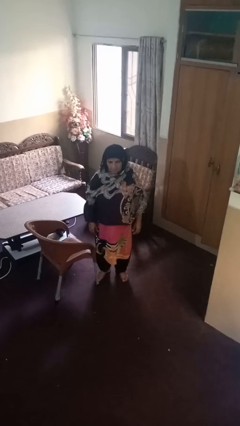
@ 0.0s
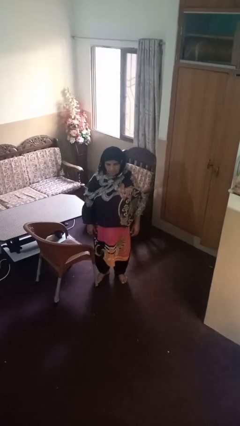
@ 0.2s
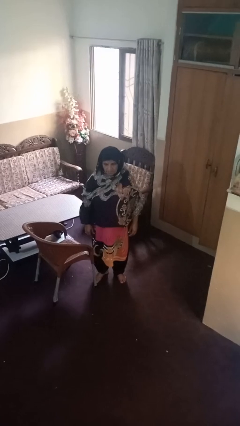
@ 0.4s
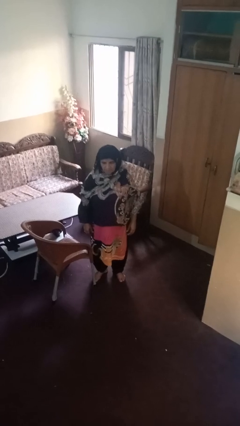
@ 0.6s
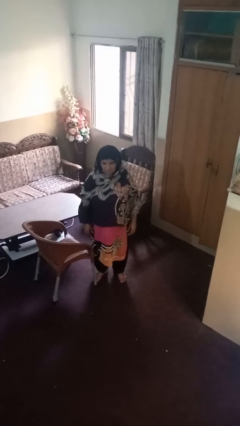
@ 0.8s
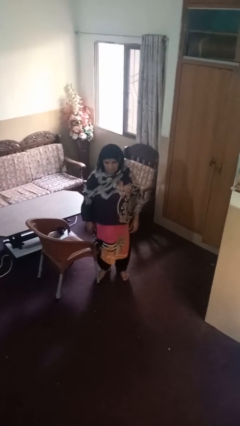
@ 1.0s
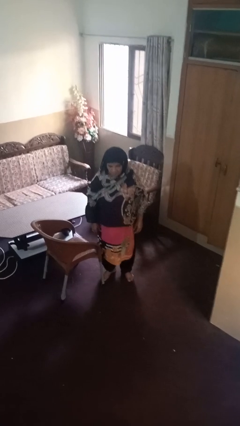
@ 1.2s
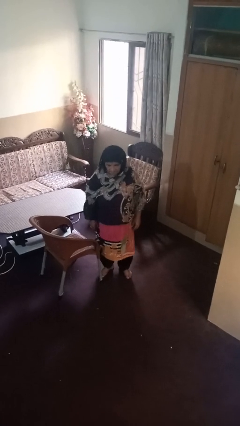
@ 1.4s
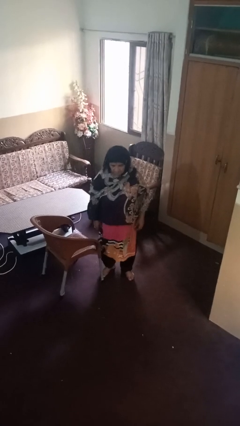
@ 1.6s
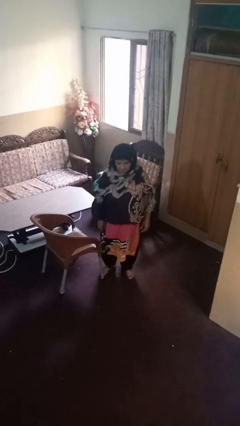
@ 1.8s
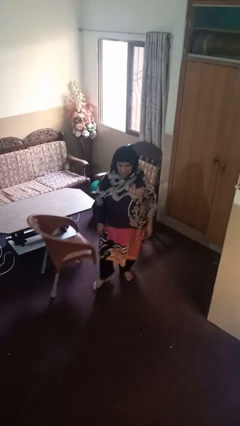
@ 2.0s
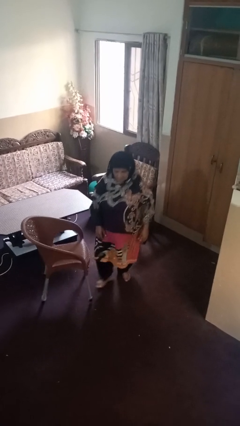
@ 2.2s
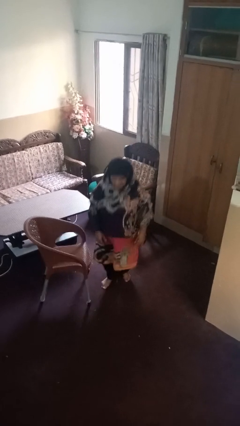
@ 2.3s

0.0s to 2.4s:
person trips on object on floor

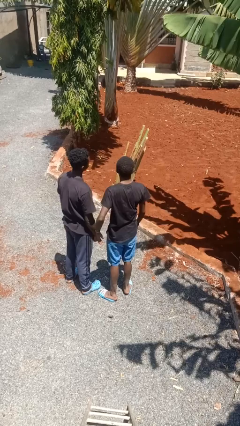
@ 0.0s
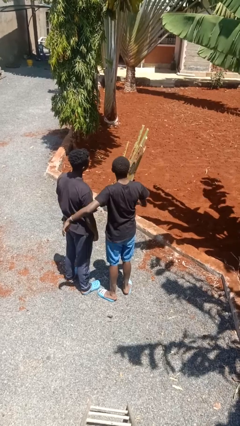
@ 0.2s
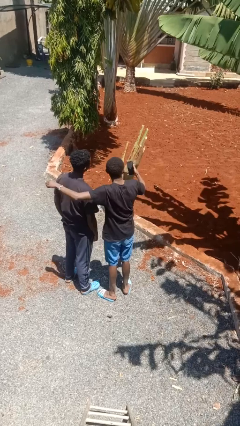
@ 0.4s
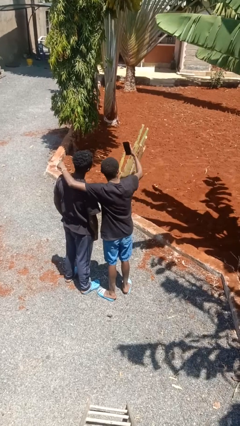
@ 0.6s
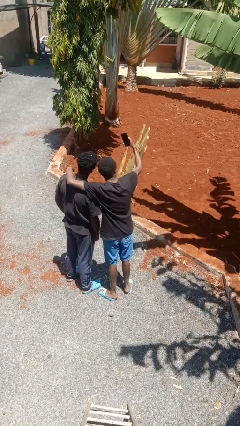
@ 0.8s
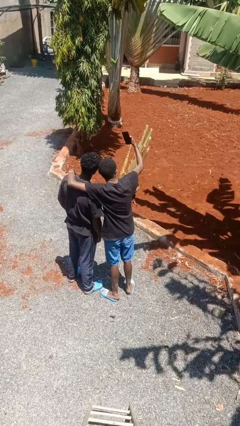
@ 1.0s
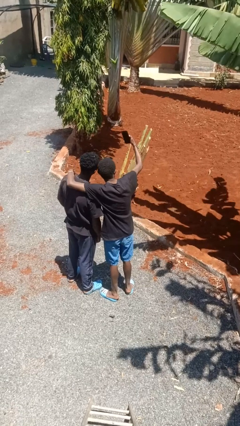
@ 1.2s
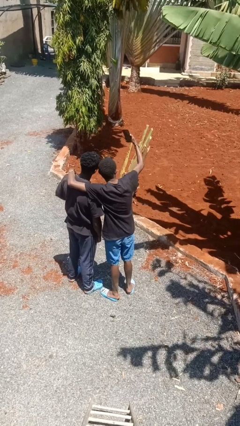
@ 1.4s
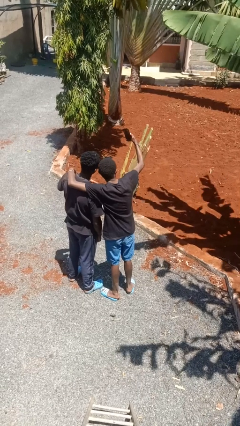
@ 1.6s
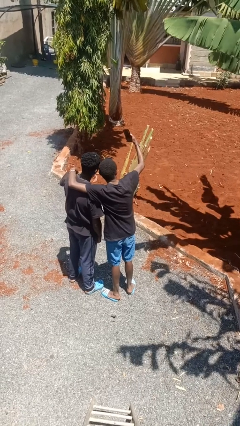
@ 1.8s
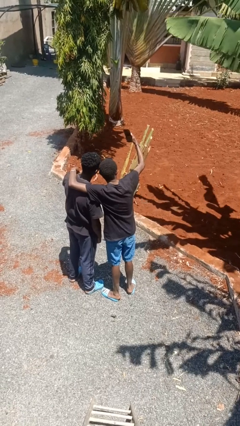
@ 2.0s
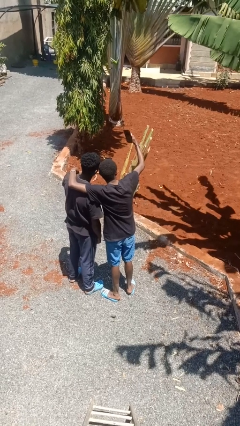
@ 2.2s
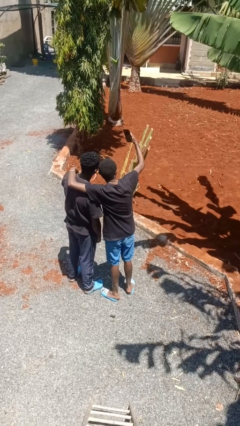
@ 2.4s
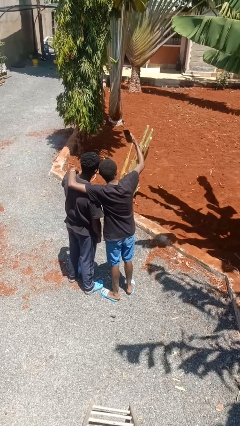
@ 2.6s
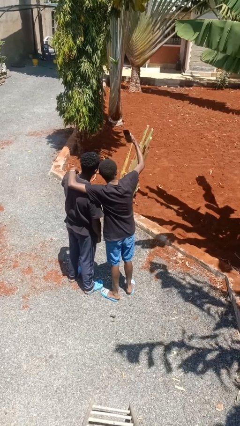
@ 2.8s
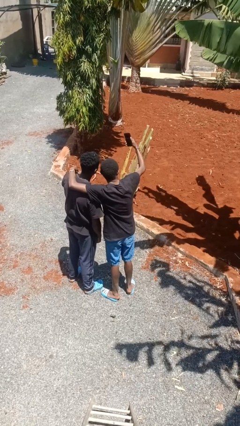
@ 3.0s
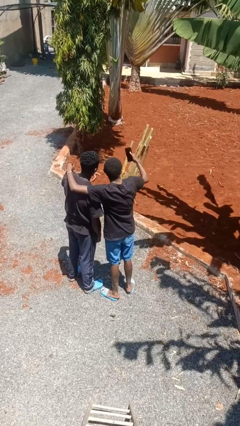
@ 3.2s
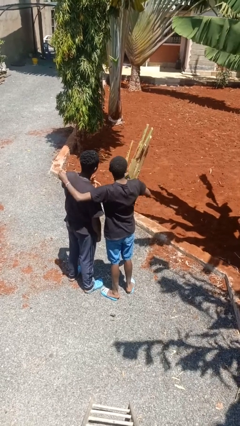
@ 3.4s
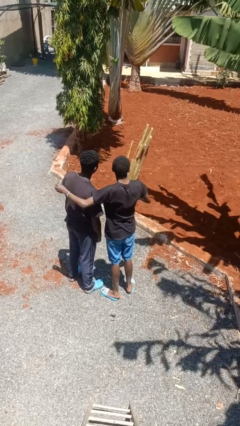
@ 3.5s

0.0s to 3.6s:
person takes selfie with person

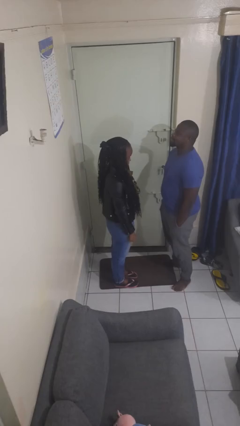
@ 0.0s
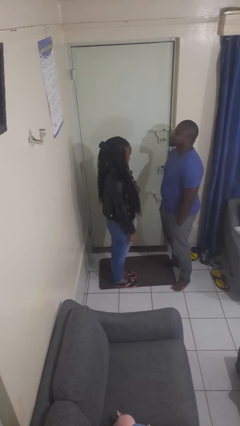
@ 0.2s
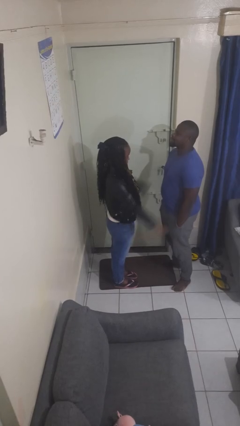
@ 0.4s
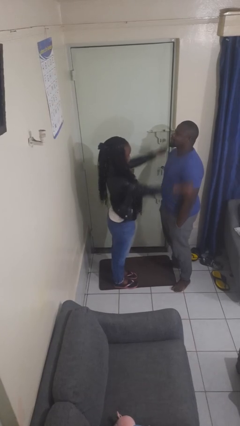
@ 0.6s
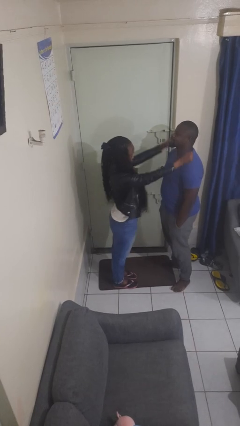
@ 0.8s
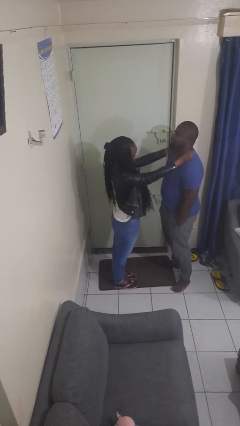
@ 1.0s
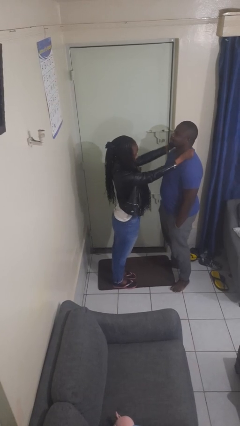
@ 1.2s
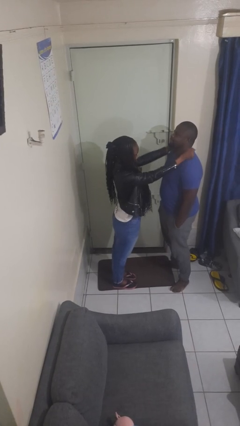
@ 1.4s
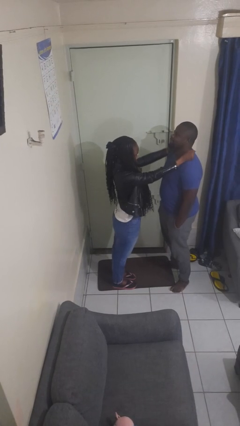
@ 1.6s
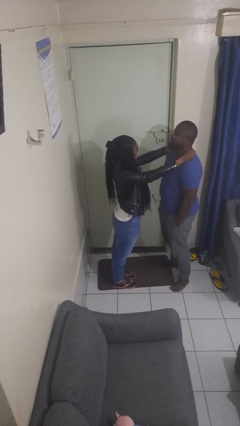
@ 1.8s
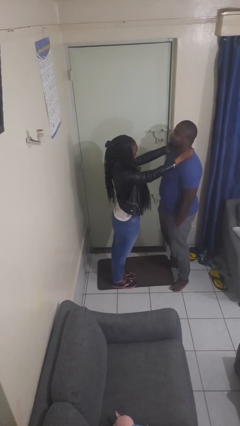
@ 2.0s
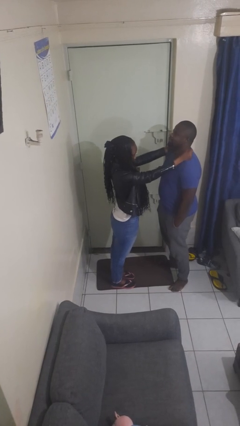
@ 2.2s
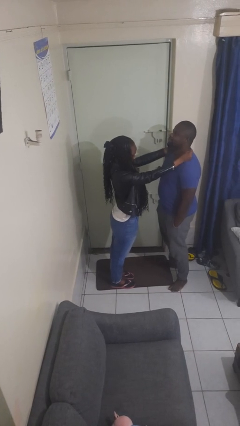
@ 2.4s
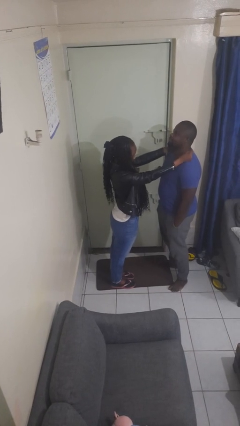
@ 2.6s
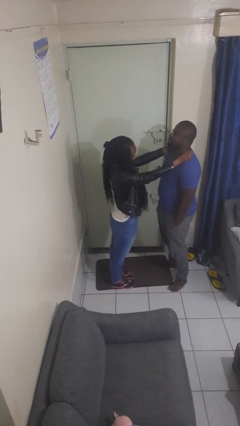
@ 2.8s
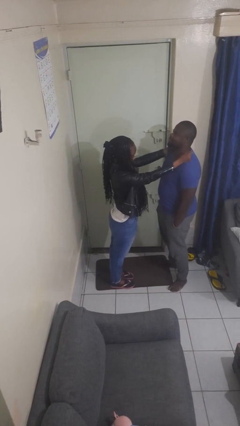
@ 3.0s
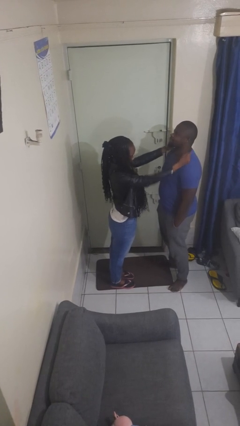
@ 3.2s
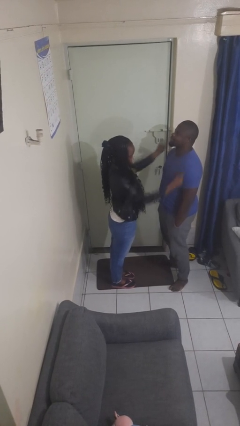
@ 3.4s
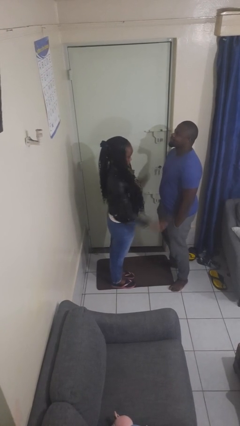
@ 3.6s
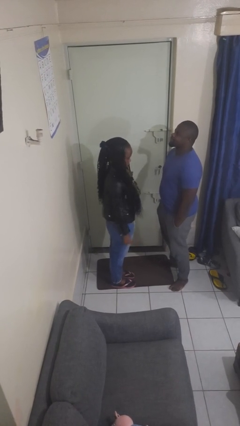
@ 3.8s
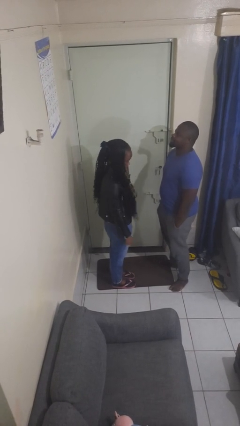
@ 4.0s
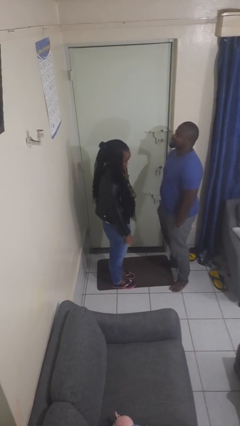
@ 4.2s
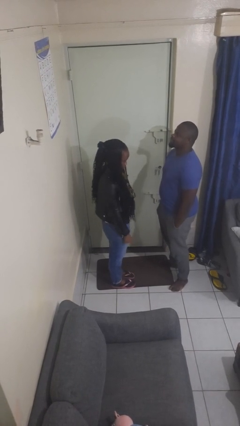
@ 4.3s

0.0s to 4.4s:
person pounds shoulders of person

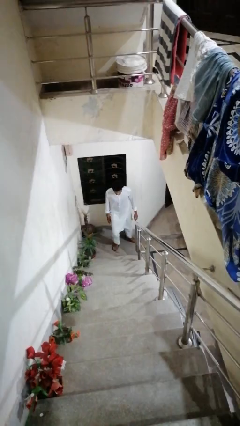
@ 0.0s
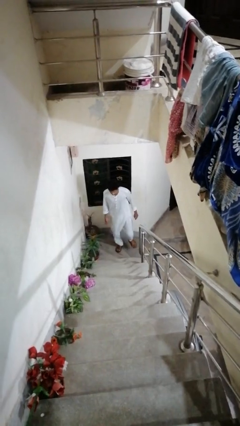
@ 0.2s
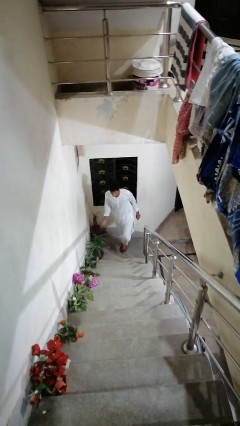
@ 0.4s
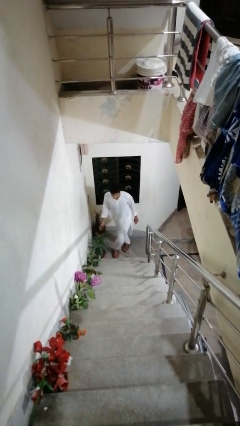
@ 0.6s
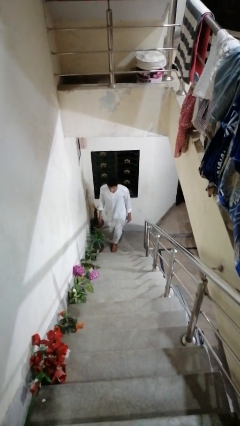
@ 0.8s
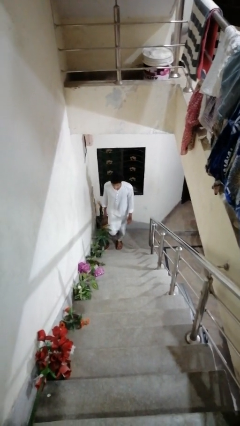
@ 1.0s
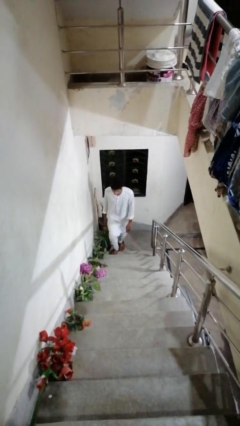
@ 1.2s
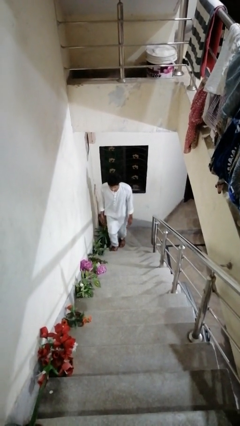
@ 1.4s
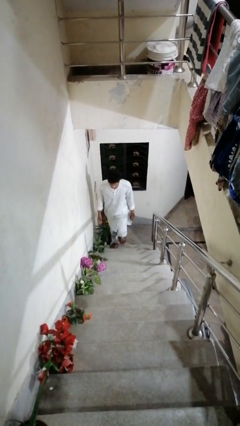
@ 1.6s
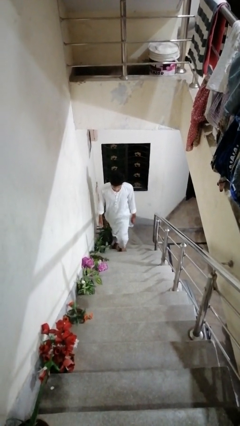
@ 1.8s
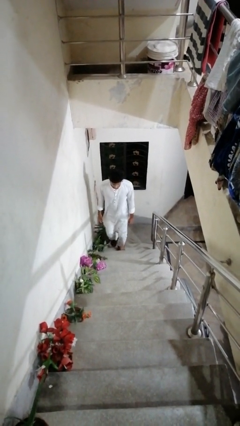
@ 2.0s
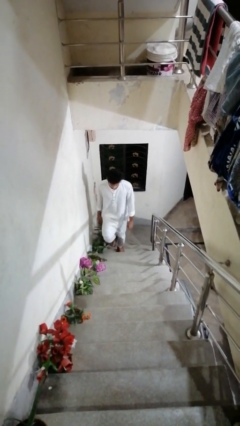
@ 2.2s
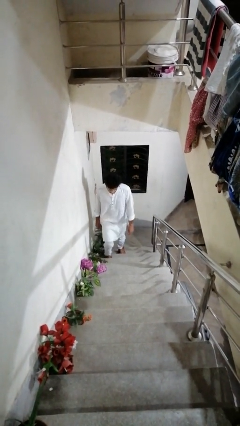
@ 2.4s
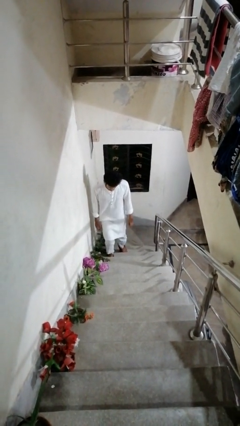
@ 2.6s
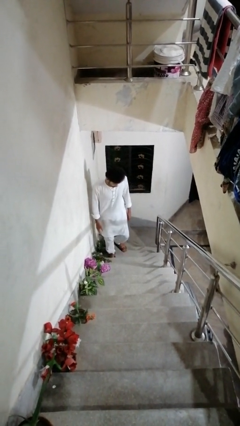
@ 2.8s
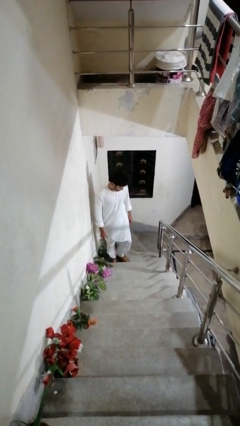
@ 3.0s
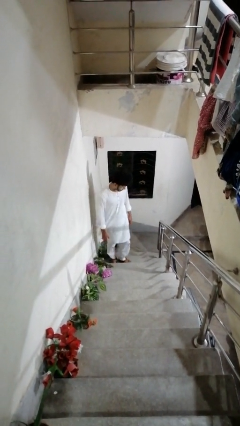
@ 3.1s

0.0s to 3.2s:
person climbs up stairs

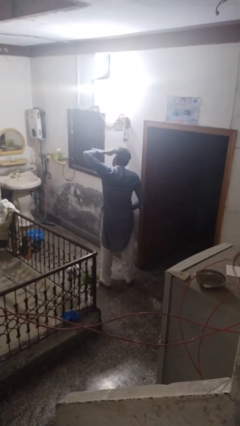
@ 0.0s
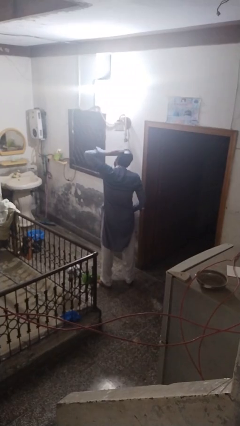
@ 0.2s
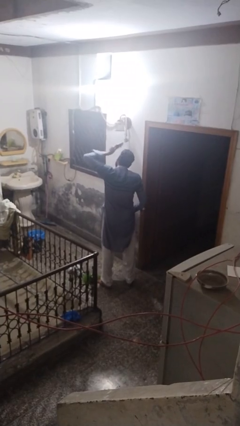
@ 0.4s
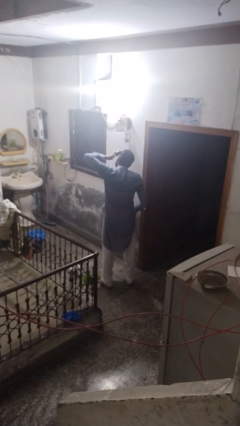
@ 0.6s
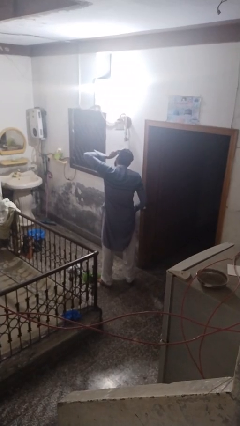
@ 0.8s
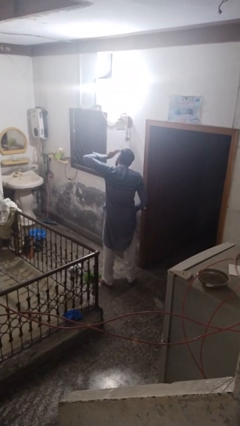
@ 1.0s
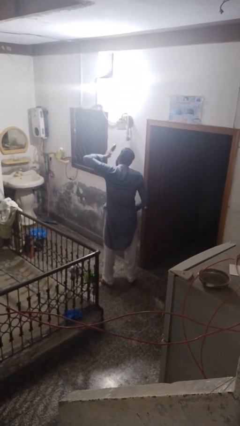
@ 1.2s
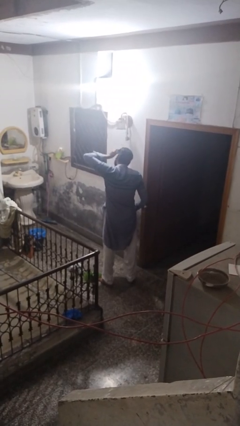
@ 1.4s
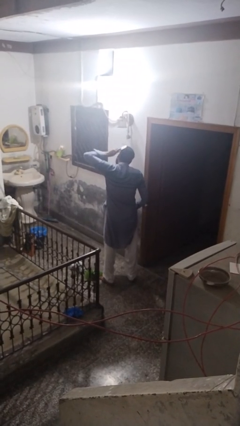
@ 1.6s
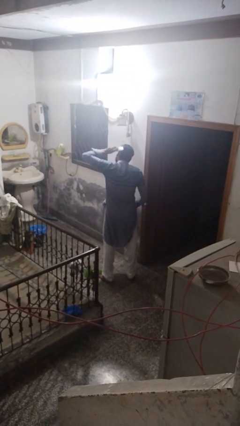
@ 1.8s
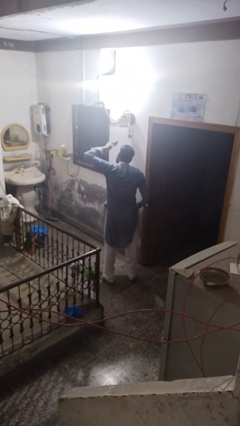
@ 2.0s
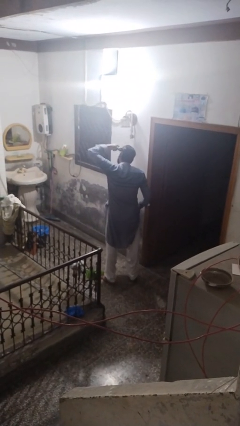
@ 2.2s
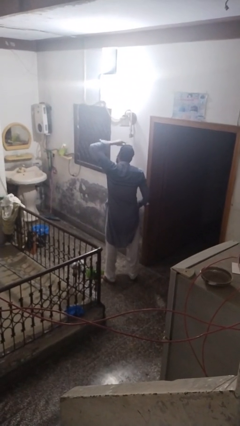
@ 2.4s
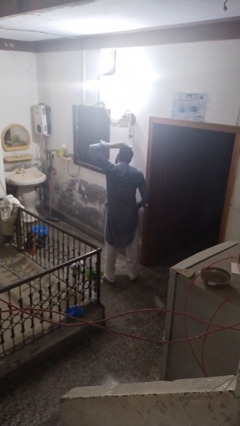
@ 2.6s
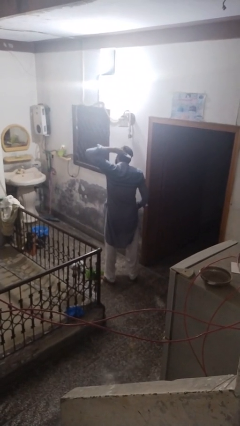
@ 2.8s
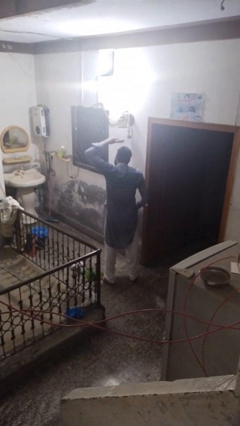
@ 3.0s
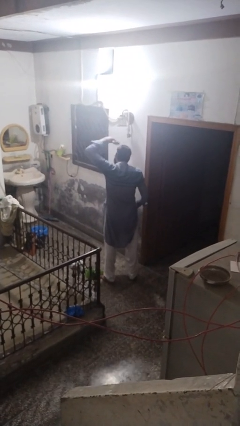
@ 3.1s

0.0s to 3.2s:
person brushes hair

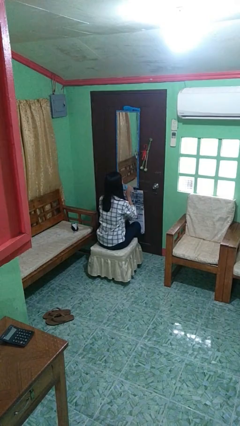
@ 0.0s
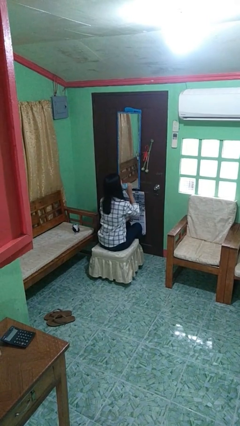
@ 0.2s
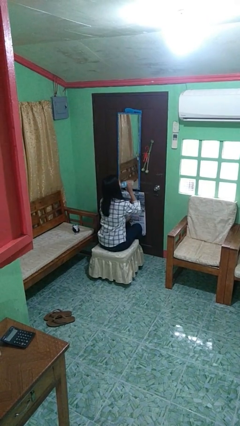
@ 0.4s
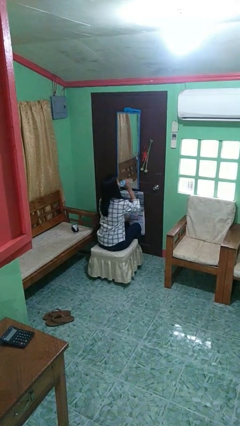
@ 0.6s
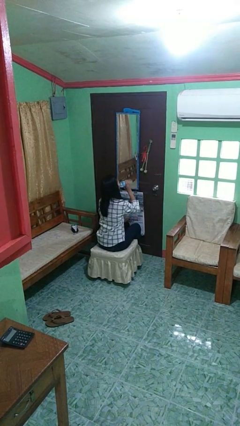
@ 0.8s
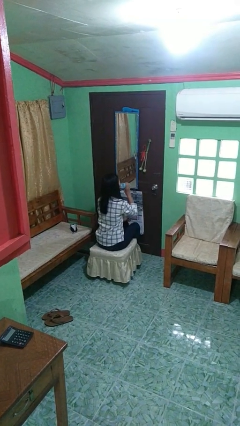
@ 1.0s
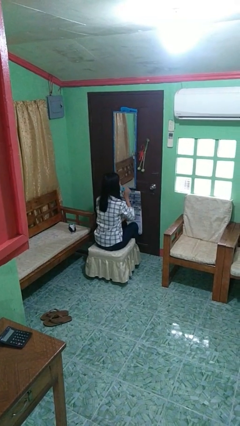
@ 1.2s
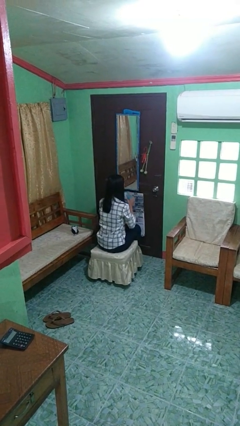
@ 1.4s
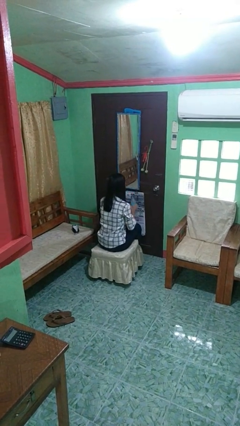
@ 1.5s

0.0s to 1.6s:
person drinks from bottle
